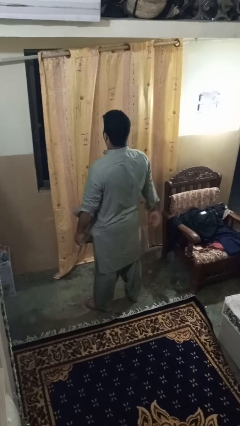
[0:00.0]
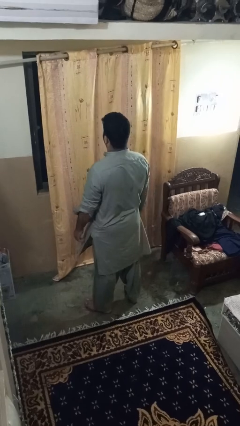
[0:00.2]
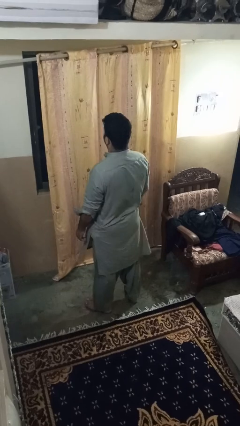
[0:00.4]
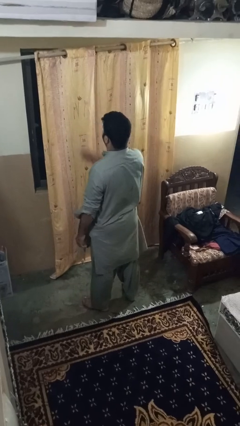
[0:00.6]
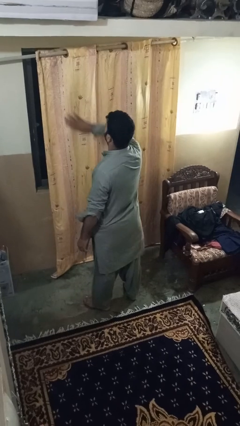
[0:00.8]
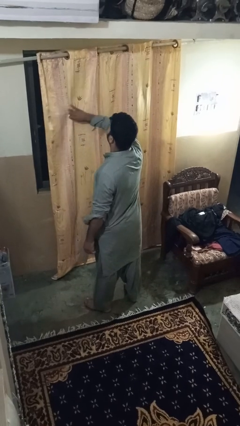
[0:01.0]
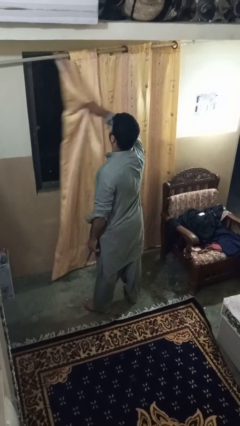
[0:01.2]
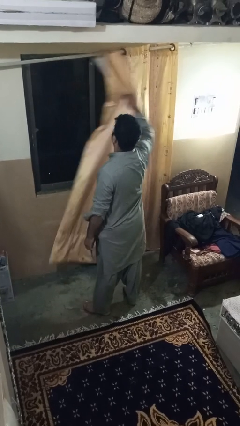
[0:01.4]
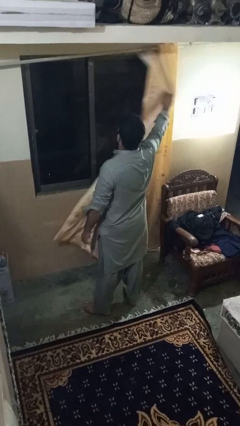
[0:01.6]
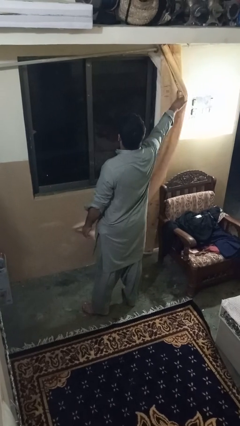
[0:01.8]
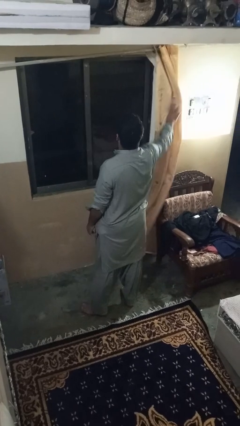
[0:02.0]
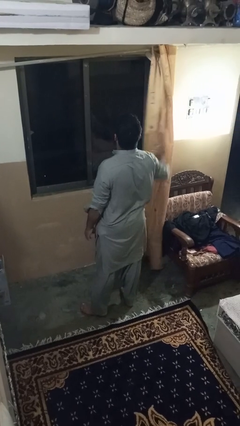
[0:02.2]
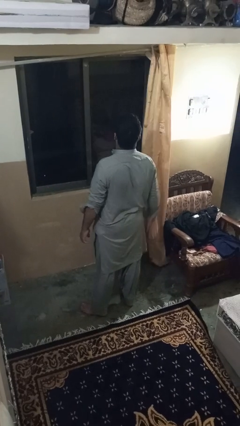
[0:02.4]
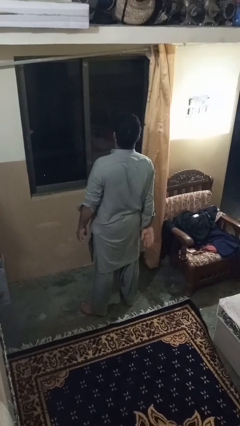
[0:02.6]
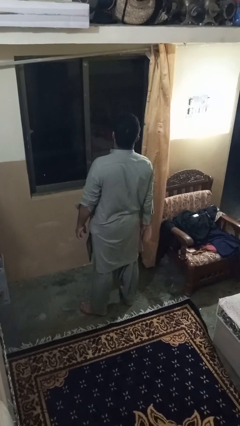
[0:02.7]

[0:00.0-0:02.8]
person opens curtains

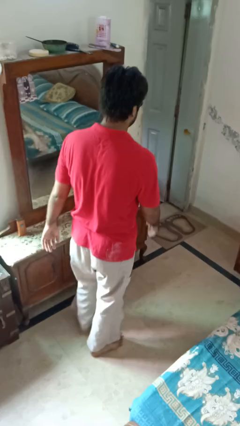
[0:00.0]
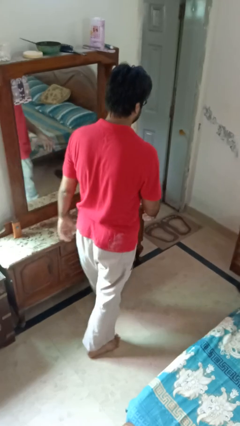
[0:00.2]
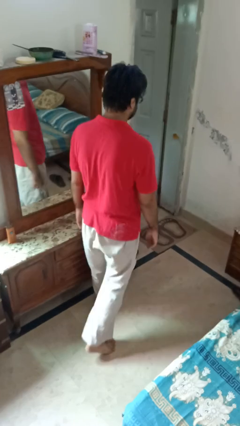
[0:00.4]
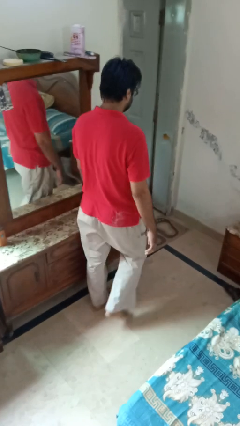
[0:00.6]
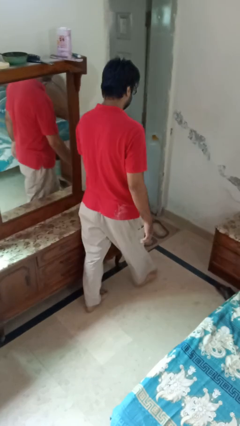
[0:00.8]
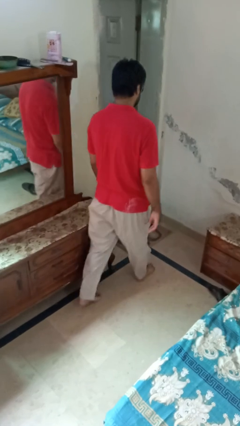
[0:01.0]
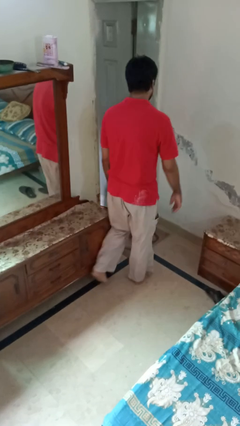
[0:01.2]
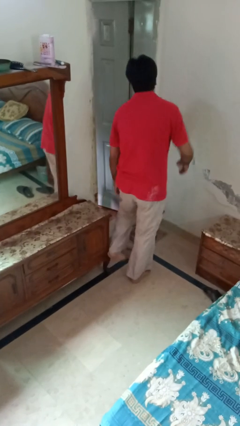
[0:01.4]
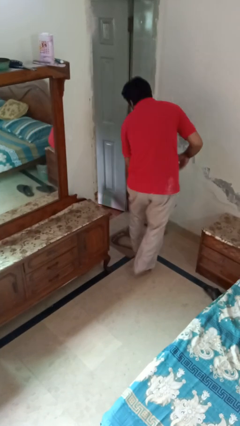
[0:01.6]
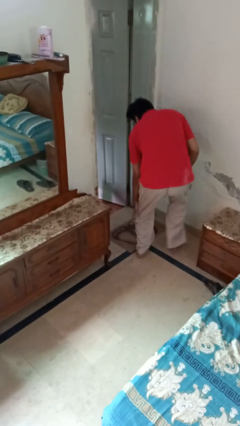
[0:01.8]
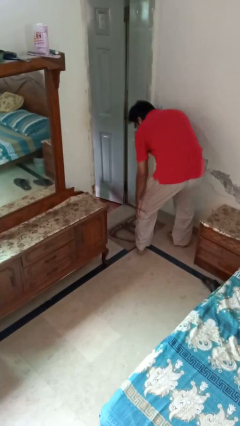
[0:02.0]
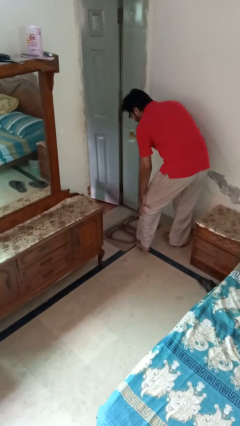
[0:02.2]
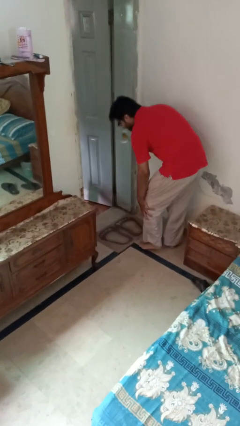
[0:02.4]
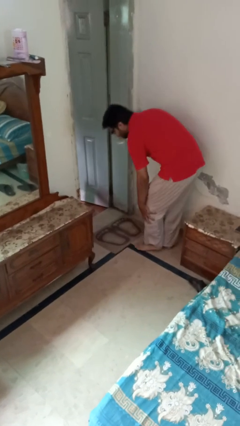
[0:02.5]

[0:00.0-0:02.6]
person stubs toe

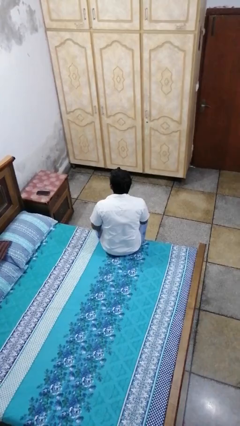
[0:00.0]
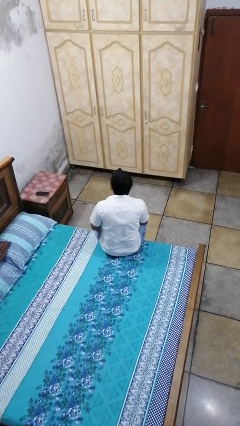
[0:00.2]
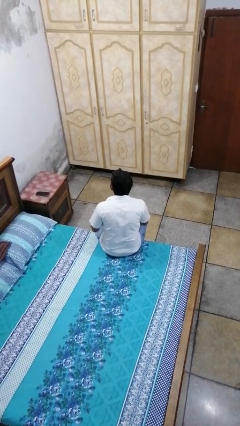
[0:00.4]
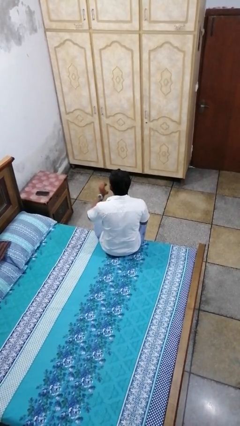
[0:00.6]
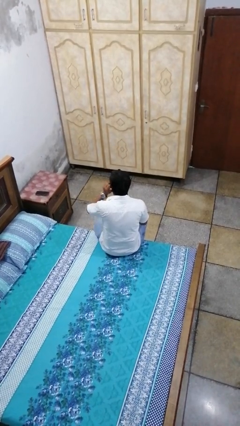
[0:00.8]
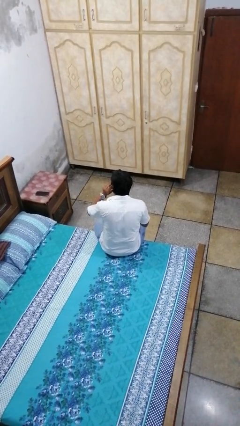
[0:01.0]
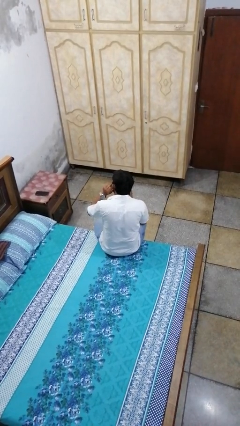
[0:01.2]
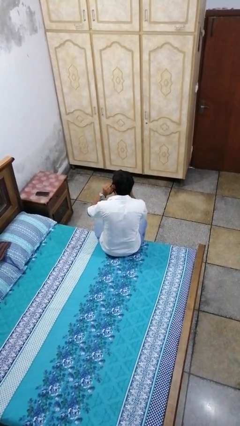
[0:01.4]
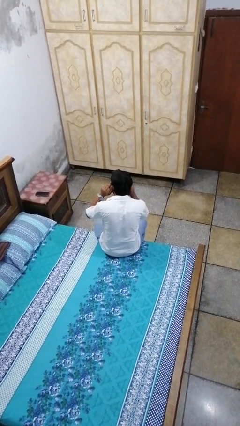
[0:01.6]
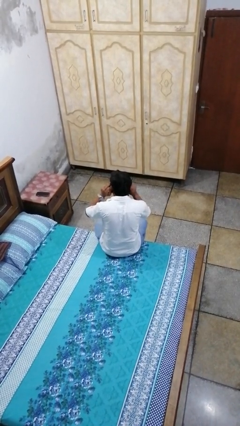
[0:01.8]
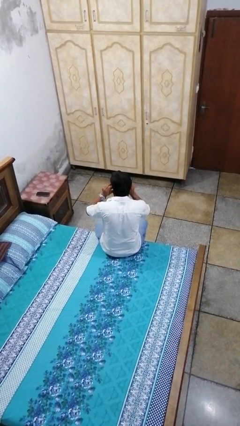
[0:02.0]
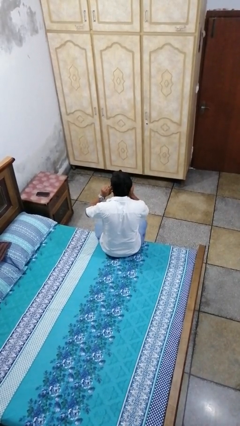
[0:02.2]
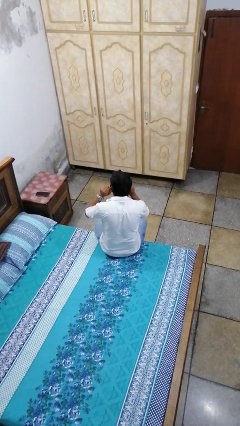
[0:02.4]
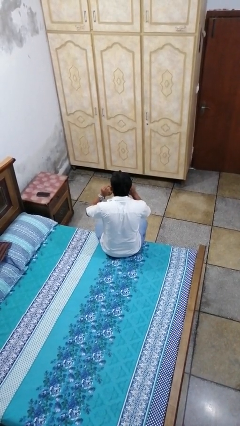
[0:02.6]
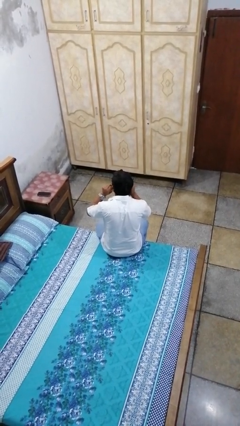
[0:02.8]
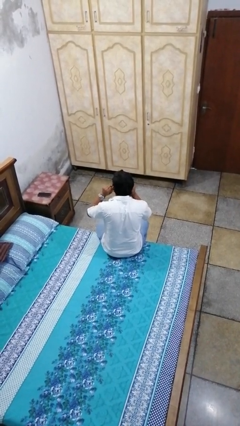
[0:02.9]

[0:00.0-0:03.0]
person touches earlobe

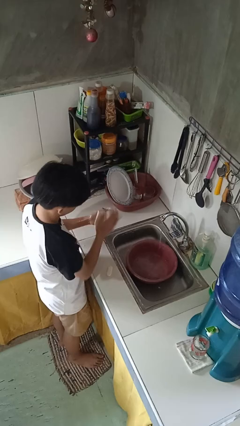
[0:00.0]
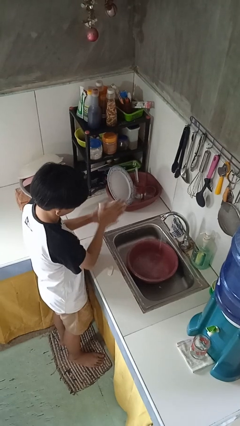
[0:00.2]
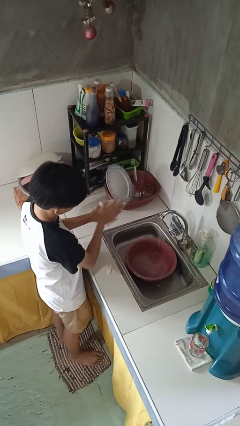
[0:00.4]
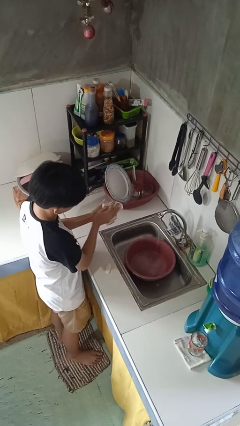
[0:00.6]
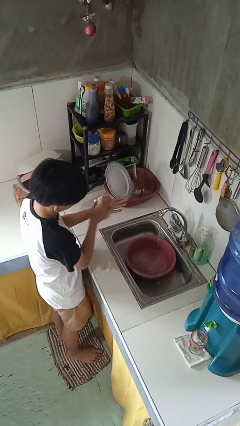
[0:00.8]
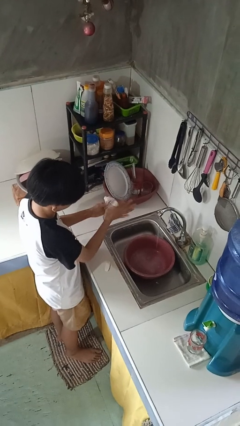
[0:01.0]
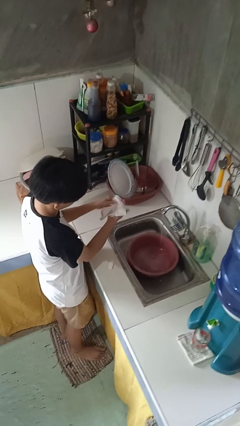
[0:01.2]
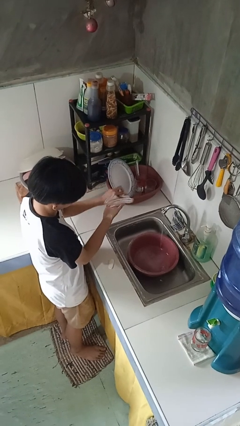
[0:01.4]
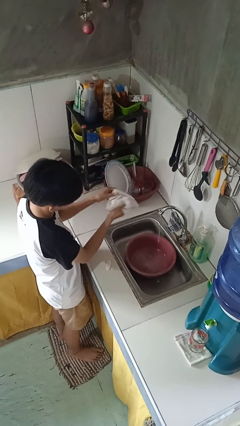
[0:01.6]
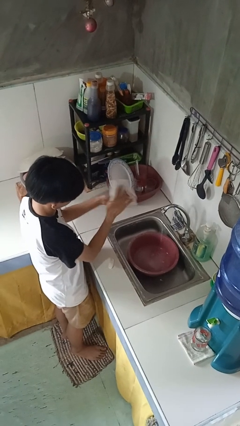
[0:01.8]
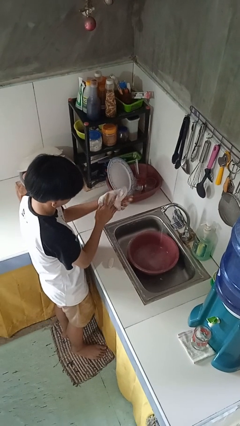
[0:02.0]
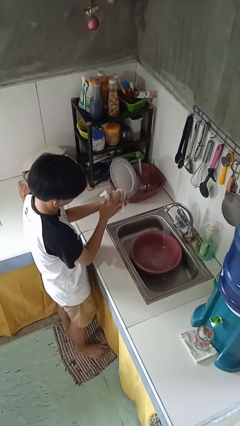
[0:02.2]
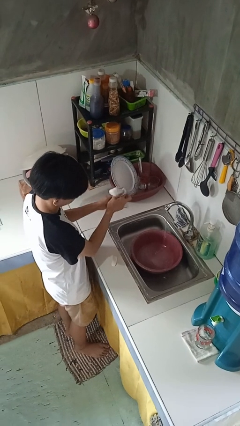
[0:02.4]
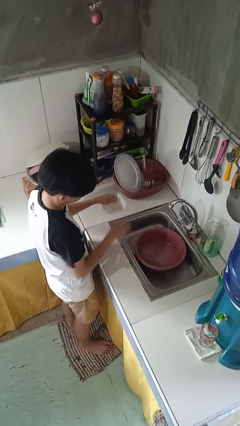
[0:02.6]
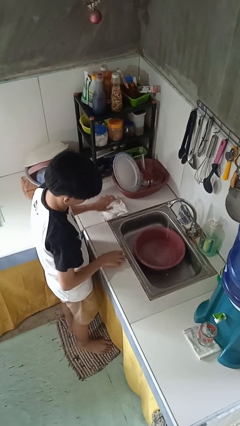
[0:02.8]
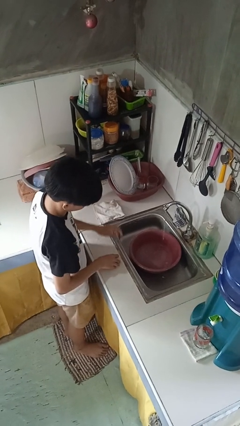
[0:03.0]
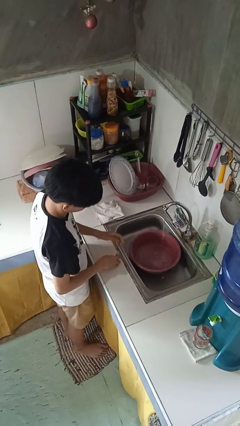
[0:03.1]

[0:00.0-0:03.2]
person dries hands with towel

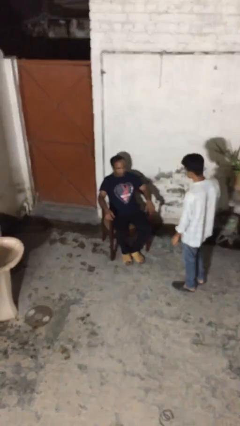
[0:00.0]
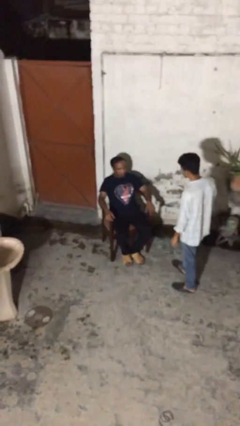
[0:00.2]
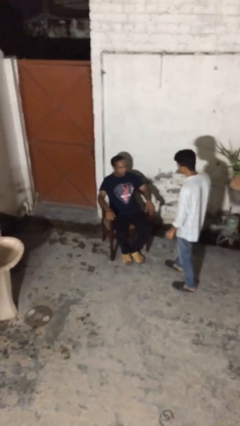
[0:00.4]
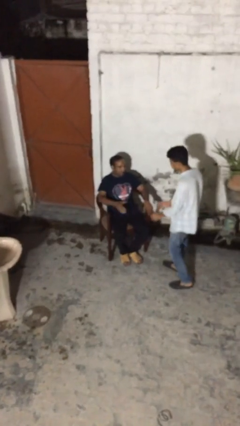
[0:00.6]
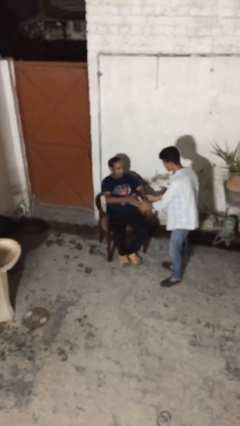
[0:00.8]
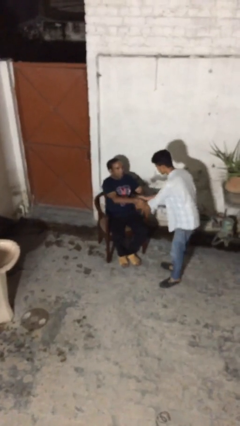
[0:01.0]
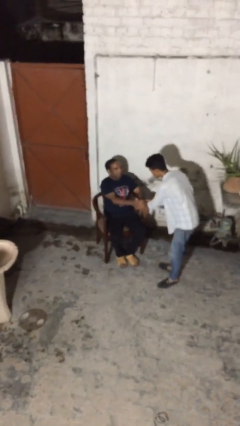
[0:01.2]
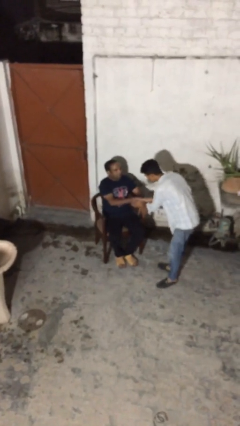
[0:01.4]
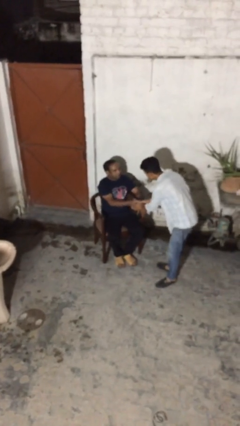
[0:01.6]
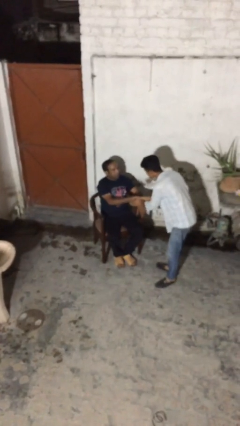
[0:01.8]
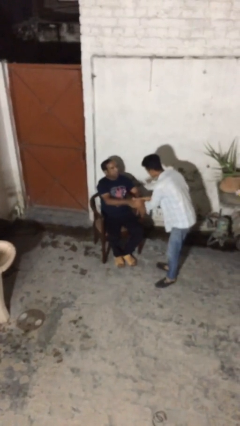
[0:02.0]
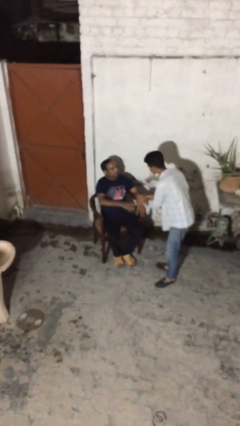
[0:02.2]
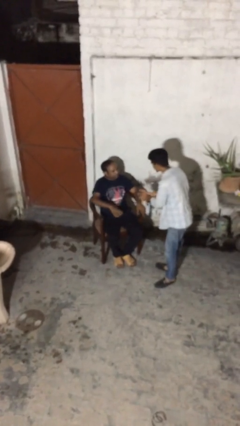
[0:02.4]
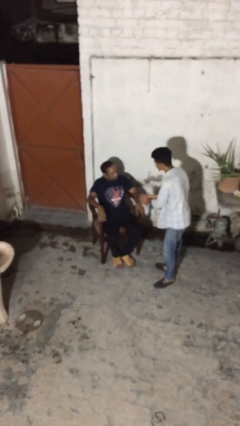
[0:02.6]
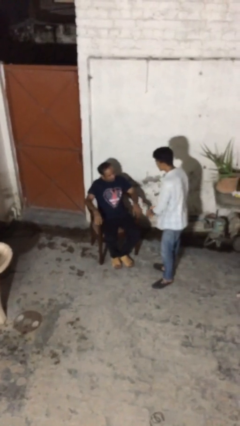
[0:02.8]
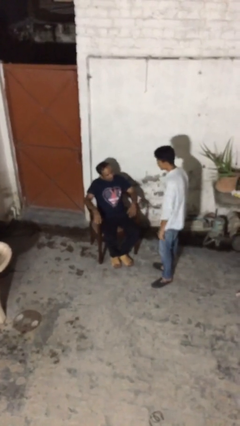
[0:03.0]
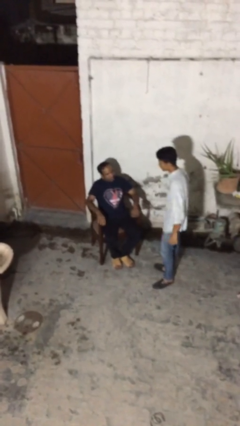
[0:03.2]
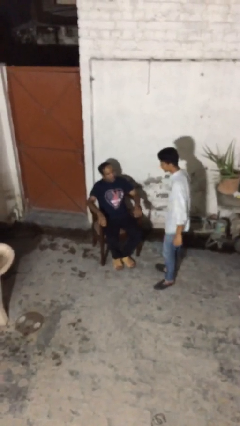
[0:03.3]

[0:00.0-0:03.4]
person shakes hand

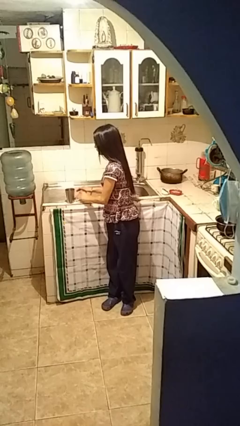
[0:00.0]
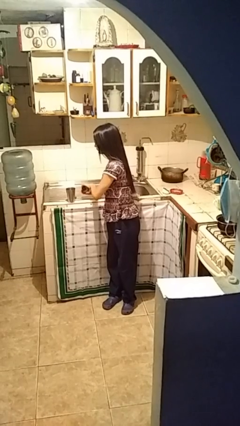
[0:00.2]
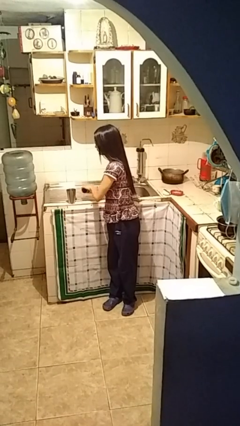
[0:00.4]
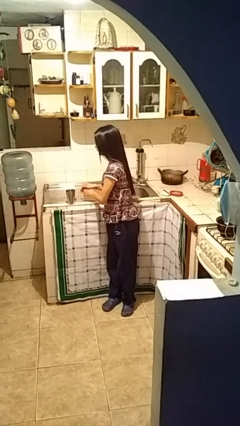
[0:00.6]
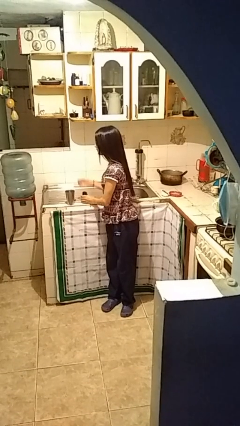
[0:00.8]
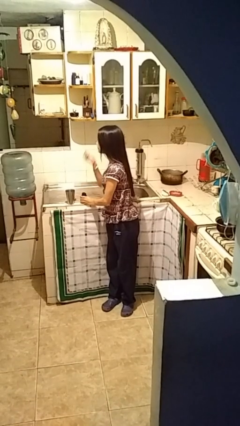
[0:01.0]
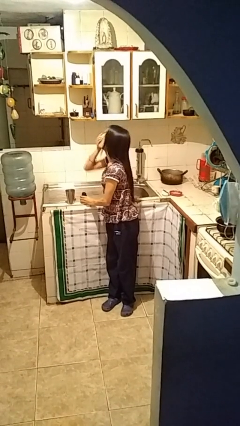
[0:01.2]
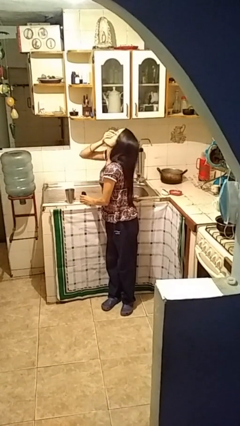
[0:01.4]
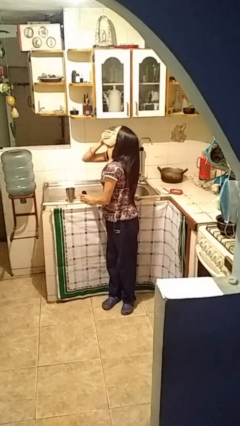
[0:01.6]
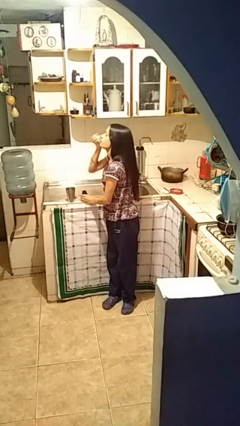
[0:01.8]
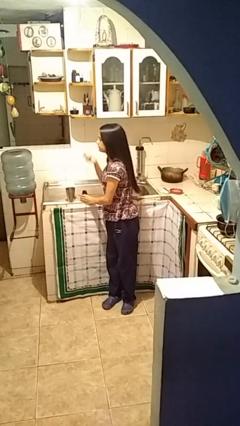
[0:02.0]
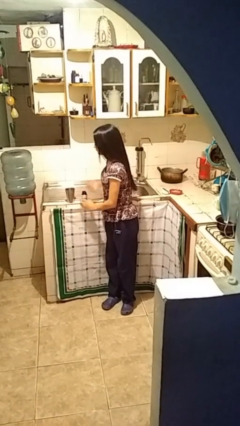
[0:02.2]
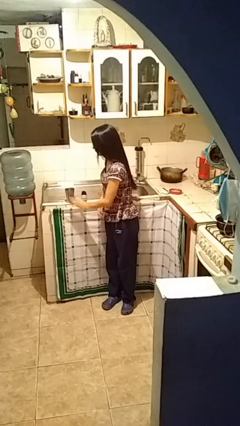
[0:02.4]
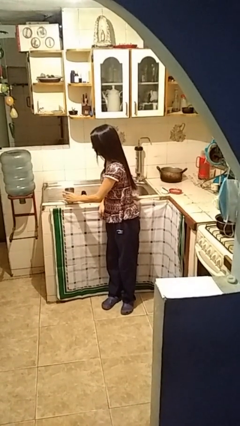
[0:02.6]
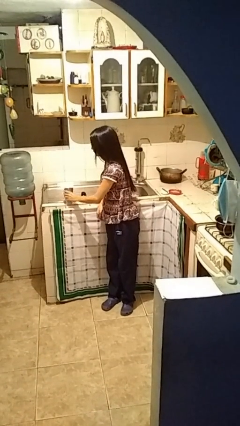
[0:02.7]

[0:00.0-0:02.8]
person takes medicine pills
